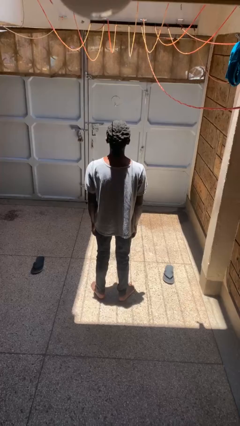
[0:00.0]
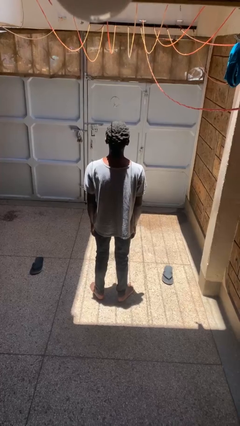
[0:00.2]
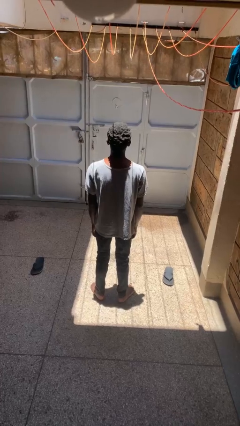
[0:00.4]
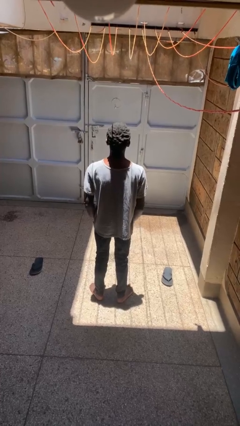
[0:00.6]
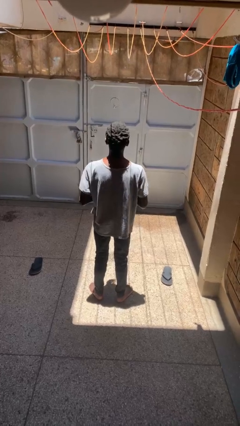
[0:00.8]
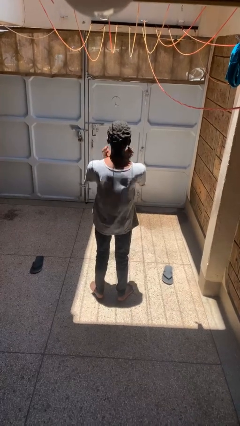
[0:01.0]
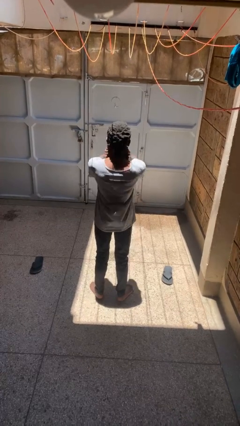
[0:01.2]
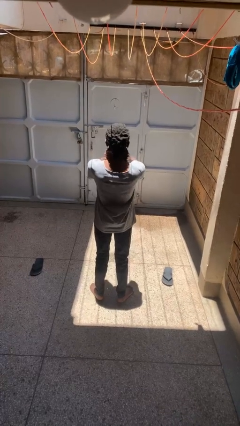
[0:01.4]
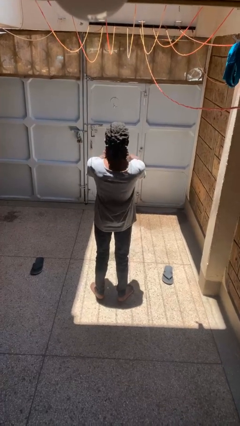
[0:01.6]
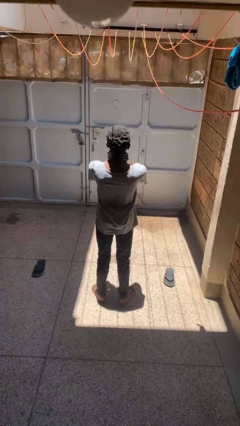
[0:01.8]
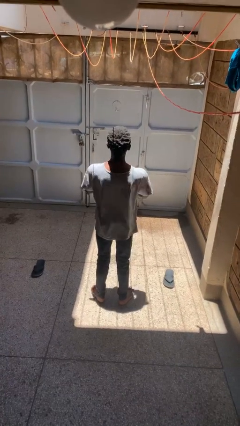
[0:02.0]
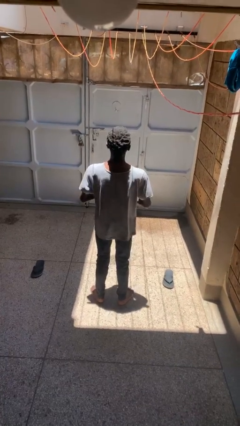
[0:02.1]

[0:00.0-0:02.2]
person rubs neck

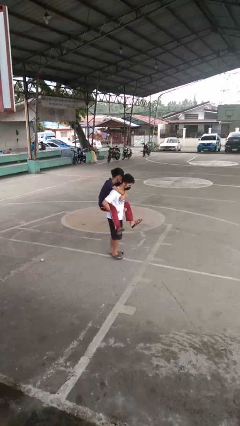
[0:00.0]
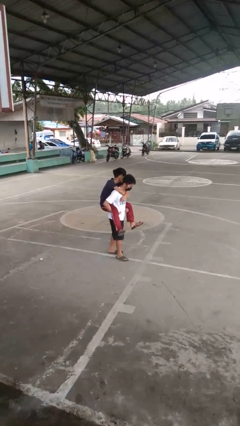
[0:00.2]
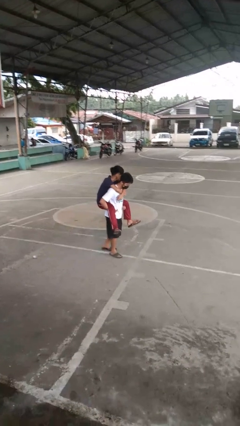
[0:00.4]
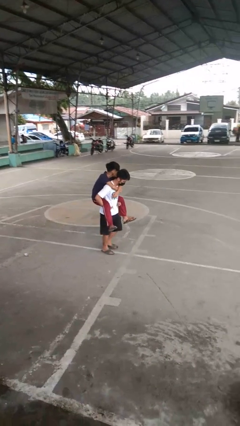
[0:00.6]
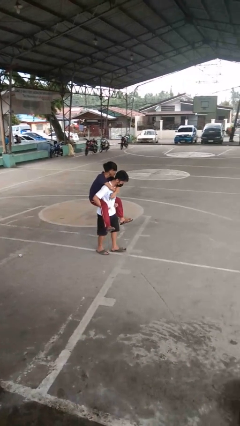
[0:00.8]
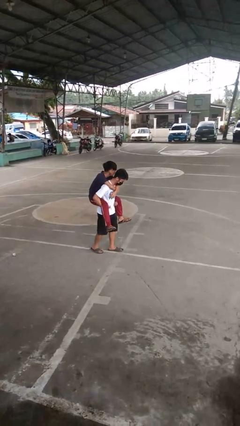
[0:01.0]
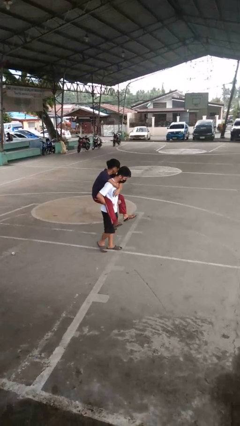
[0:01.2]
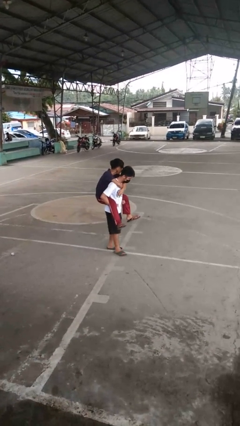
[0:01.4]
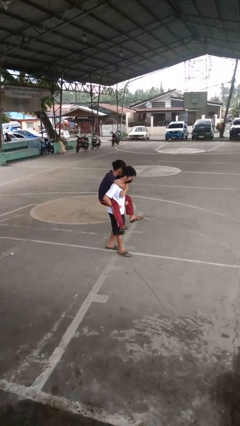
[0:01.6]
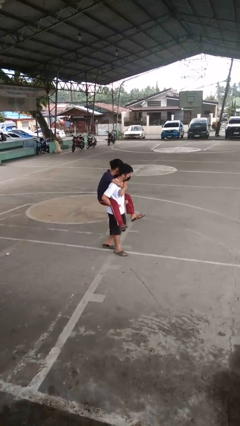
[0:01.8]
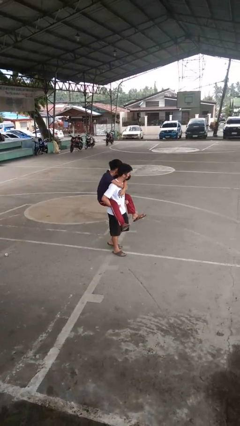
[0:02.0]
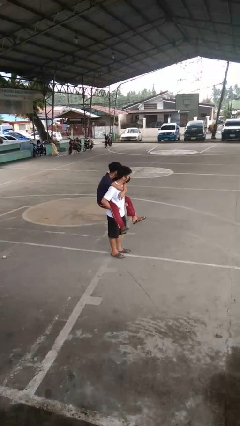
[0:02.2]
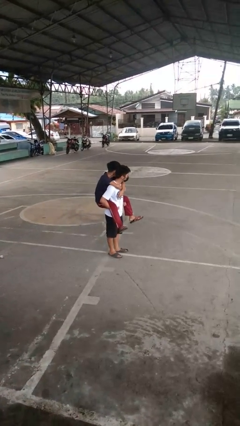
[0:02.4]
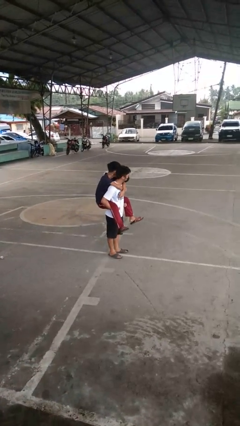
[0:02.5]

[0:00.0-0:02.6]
person carries person on back

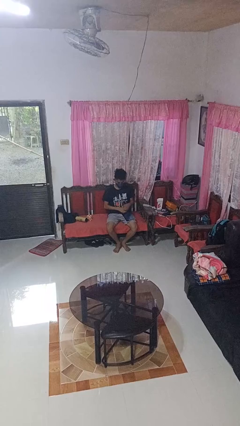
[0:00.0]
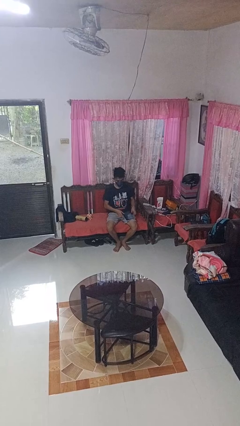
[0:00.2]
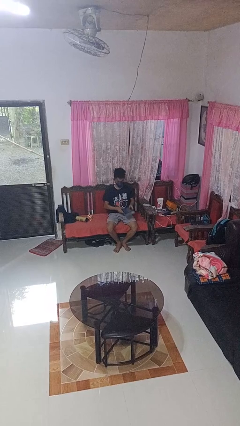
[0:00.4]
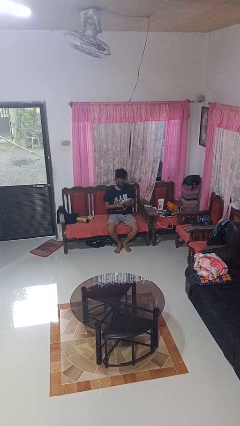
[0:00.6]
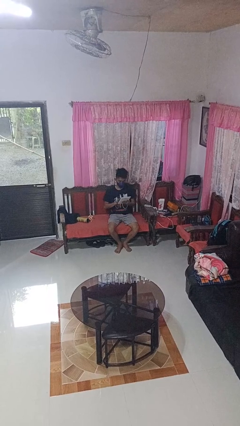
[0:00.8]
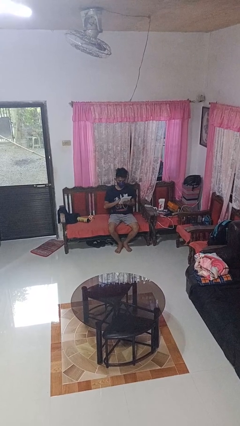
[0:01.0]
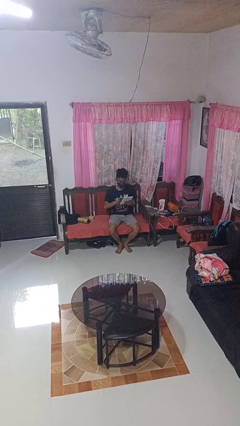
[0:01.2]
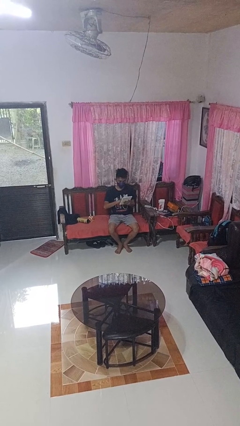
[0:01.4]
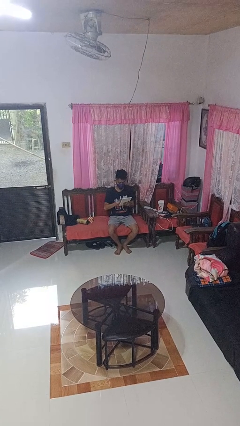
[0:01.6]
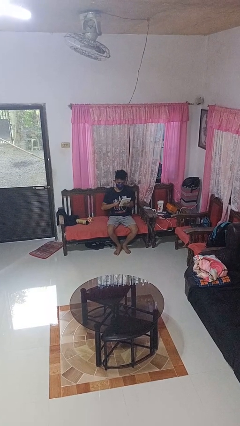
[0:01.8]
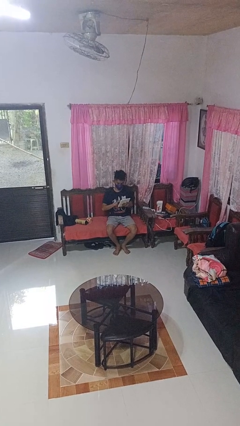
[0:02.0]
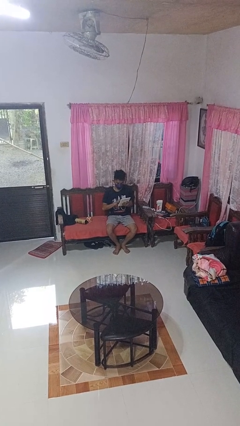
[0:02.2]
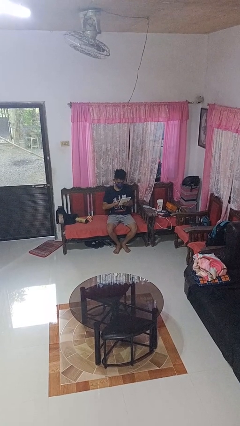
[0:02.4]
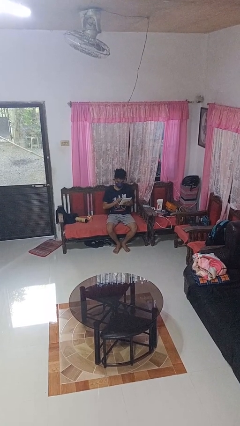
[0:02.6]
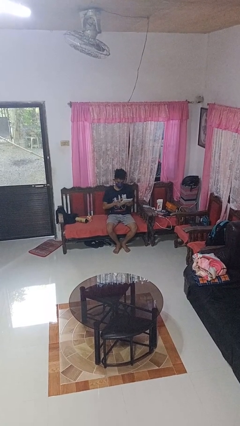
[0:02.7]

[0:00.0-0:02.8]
person interacts with tablet

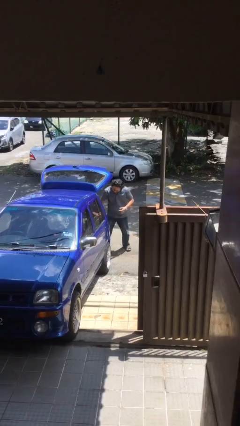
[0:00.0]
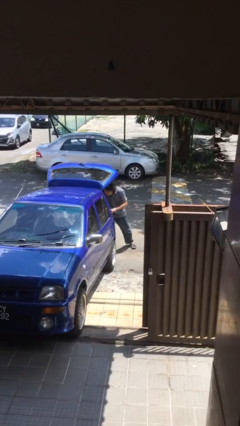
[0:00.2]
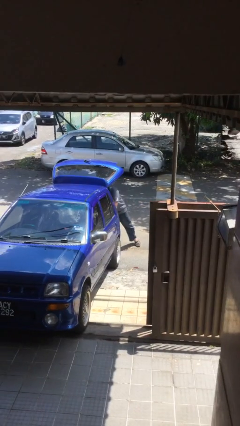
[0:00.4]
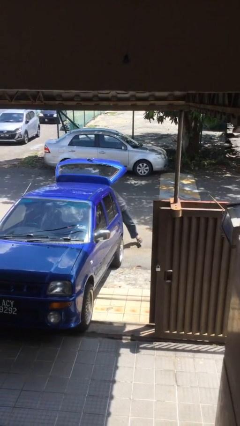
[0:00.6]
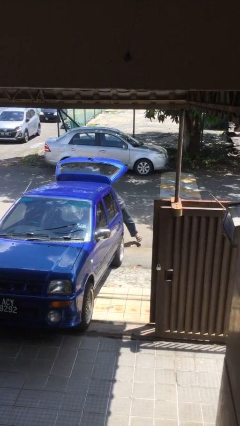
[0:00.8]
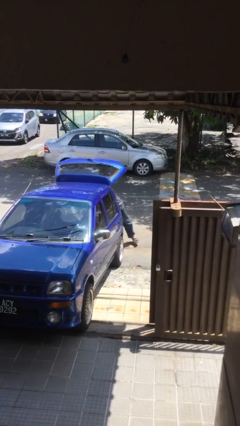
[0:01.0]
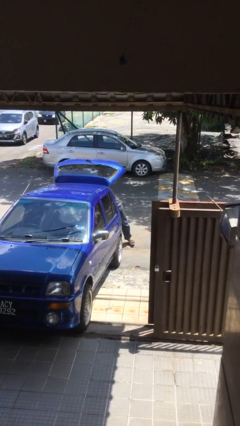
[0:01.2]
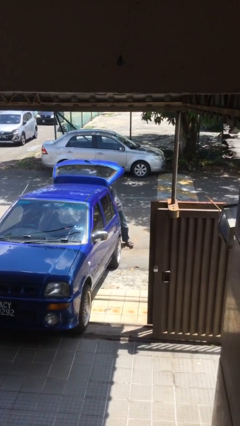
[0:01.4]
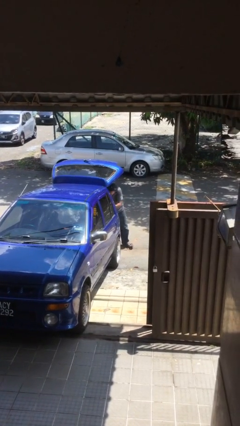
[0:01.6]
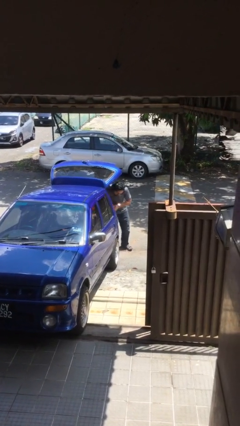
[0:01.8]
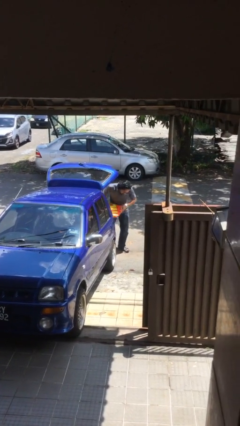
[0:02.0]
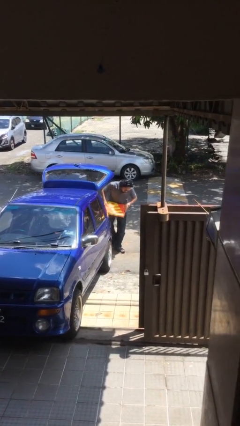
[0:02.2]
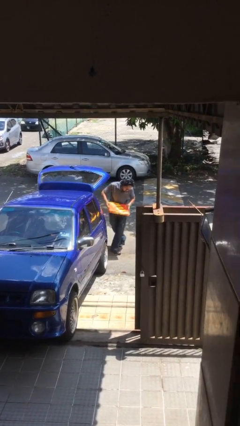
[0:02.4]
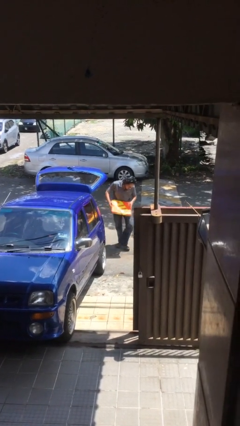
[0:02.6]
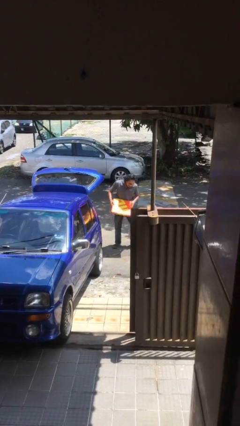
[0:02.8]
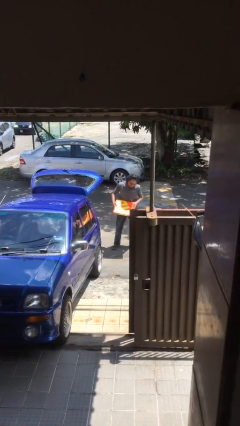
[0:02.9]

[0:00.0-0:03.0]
person unloads car

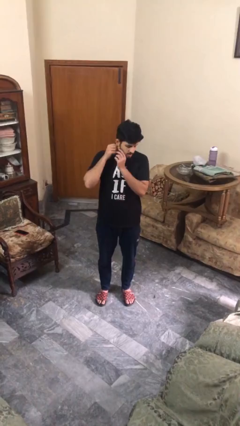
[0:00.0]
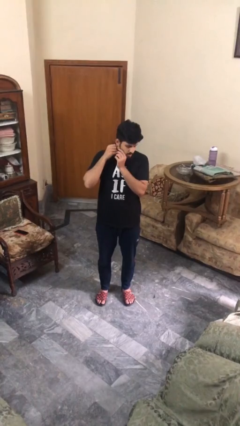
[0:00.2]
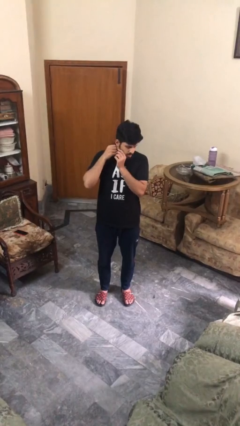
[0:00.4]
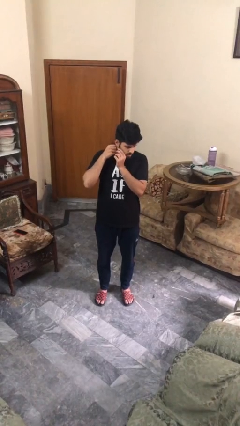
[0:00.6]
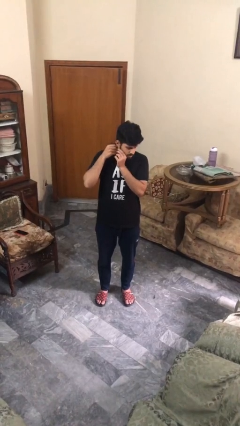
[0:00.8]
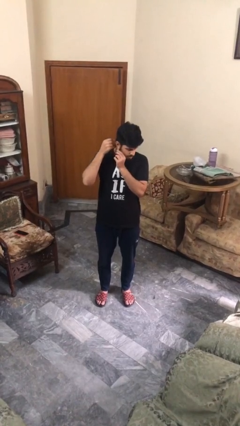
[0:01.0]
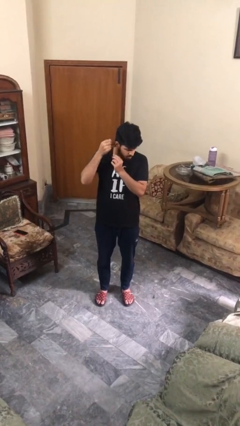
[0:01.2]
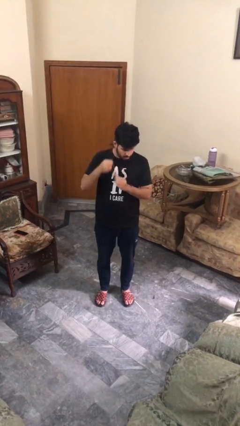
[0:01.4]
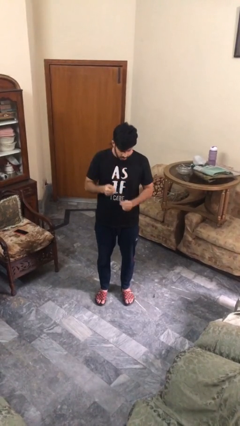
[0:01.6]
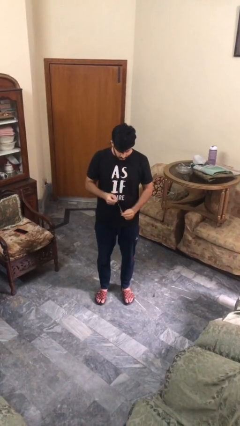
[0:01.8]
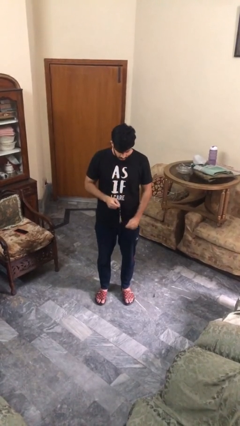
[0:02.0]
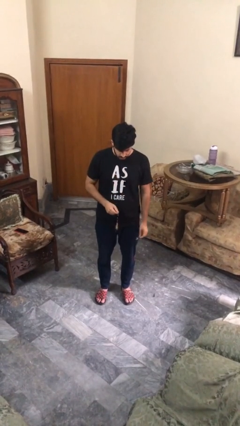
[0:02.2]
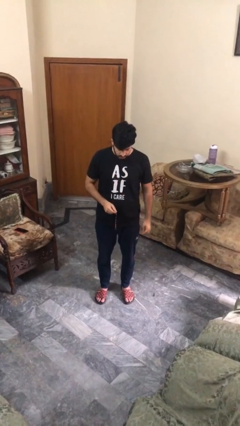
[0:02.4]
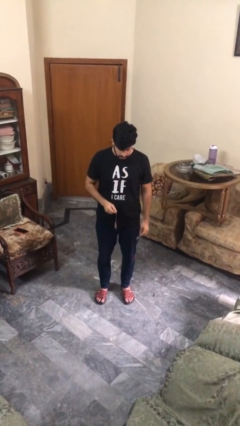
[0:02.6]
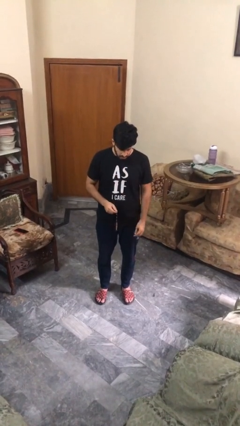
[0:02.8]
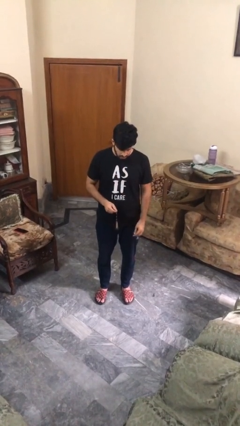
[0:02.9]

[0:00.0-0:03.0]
person takes off earrings

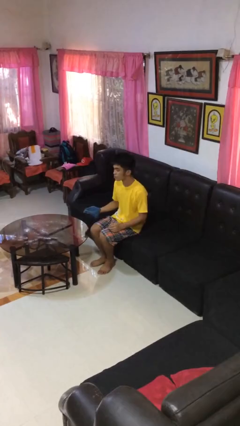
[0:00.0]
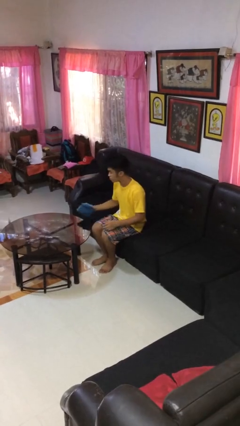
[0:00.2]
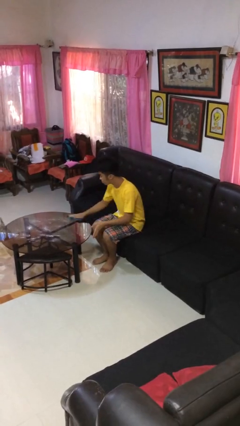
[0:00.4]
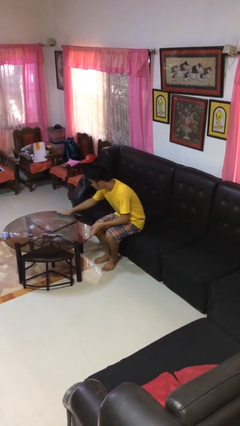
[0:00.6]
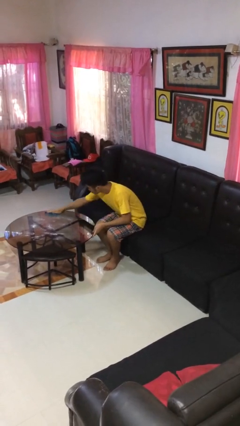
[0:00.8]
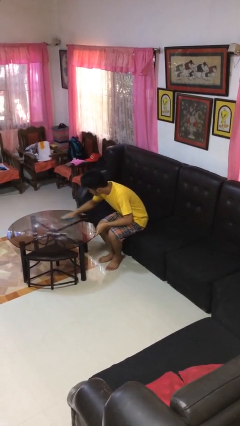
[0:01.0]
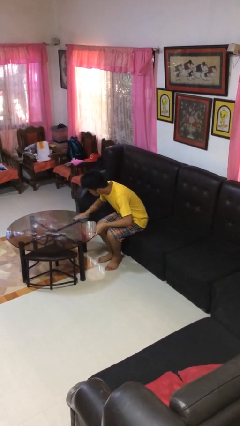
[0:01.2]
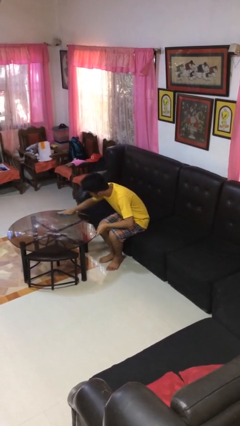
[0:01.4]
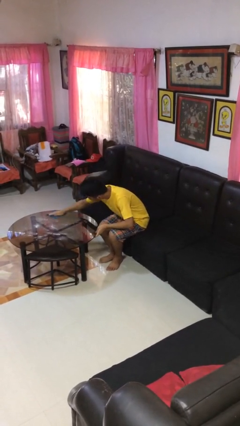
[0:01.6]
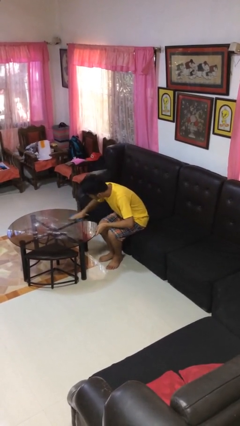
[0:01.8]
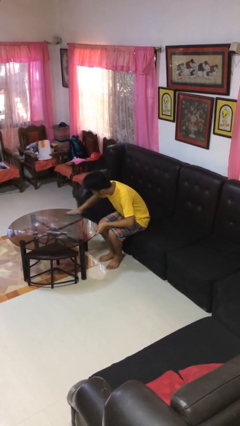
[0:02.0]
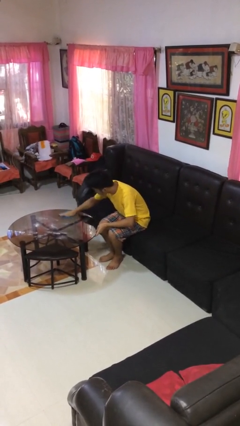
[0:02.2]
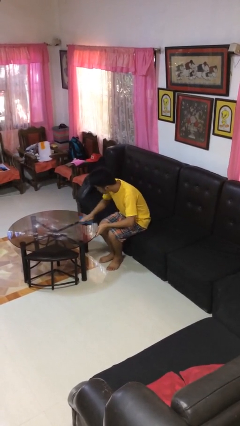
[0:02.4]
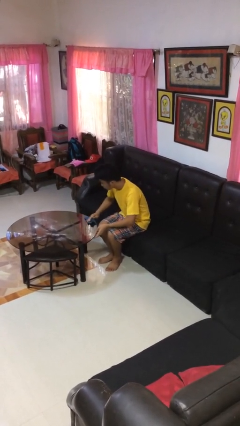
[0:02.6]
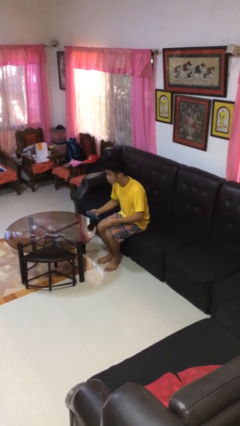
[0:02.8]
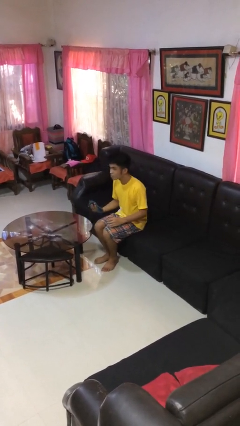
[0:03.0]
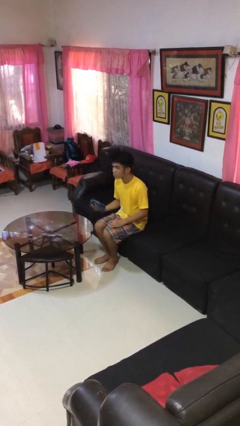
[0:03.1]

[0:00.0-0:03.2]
person cleans table with rag

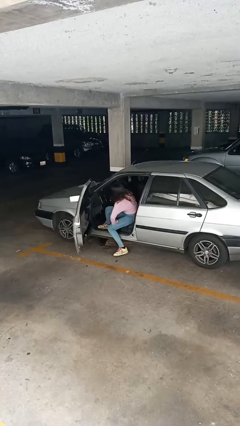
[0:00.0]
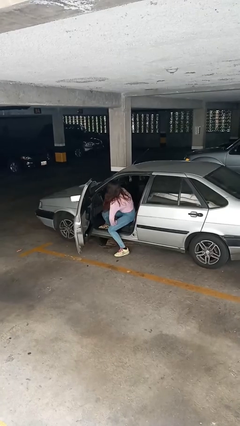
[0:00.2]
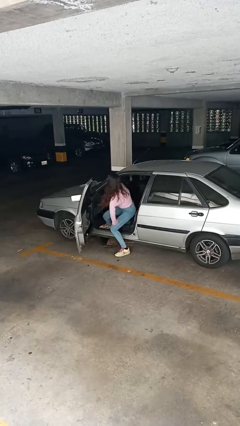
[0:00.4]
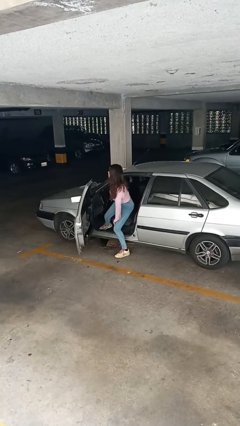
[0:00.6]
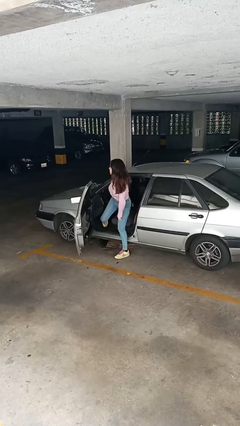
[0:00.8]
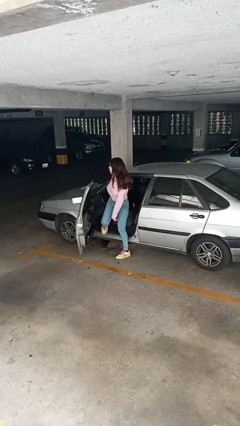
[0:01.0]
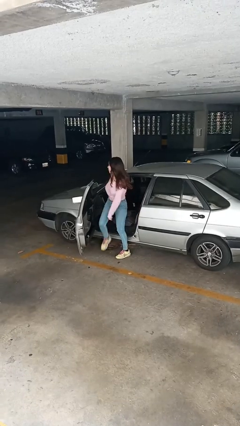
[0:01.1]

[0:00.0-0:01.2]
person exits car
